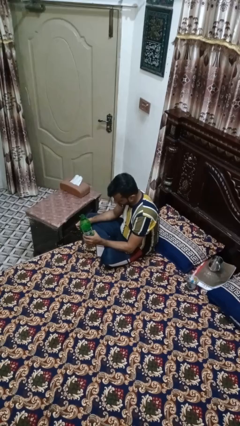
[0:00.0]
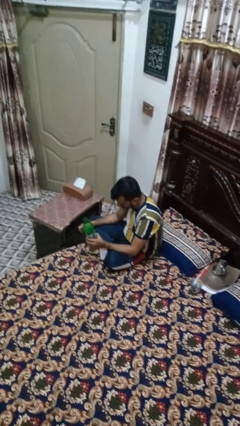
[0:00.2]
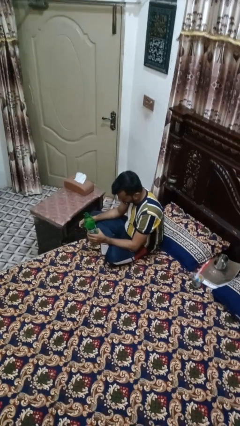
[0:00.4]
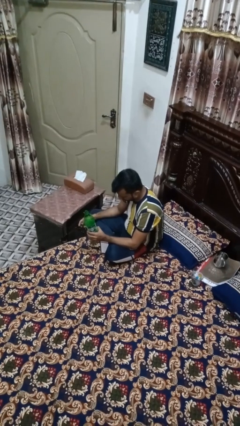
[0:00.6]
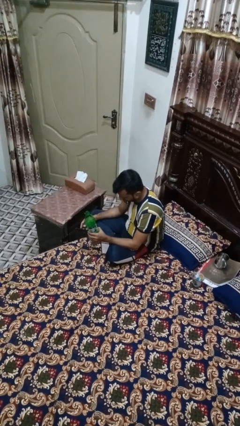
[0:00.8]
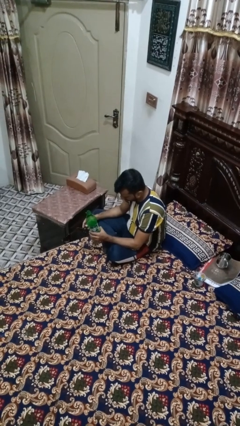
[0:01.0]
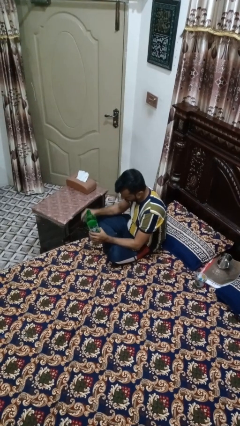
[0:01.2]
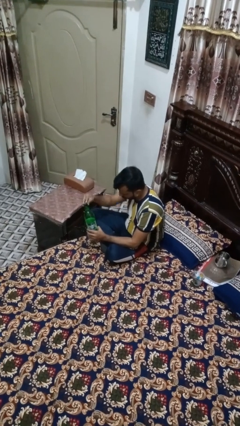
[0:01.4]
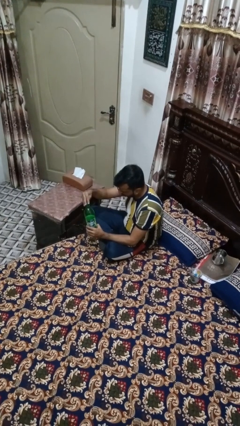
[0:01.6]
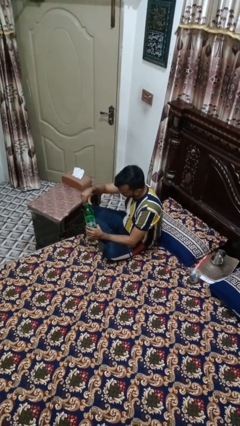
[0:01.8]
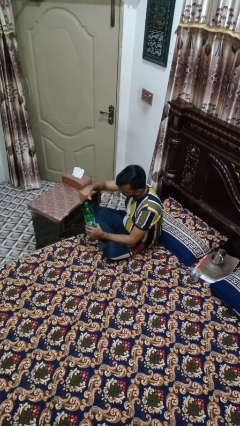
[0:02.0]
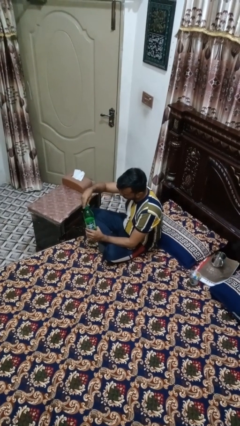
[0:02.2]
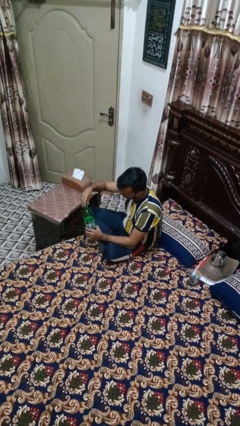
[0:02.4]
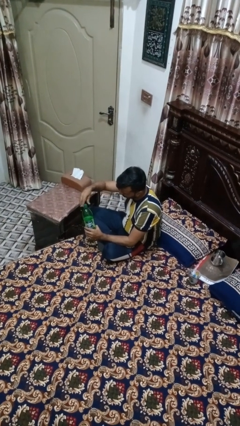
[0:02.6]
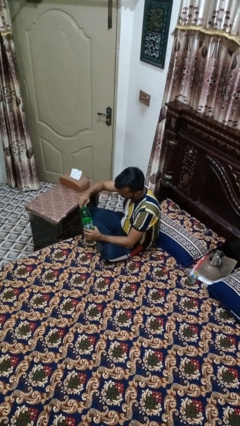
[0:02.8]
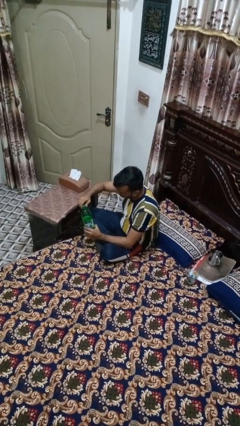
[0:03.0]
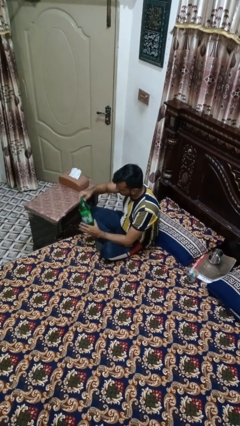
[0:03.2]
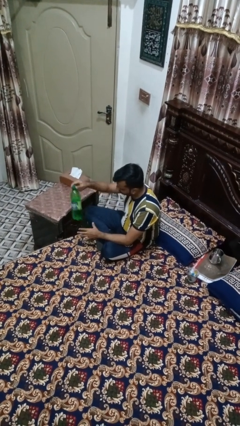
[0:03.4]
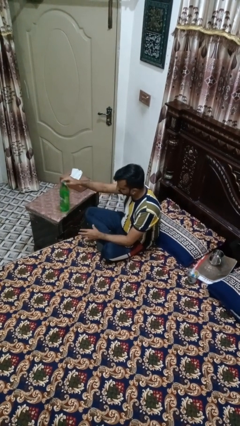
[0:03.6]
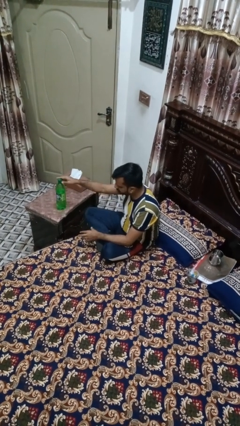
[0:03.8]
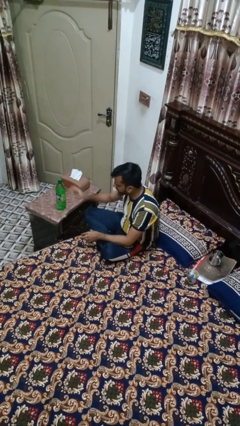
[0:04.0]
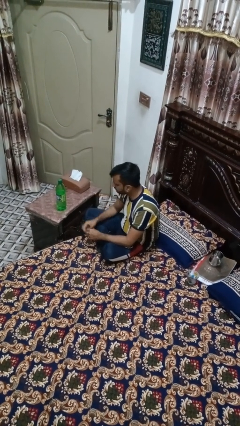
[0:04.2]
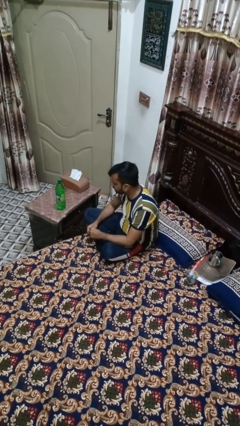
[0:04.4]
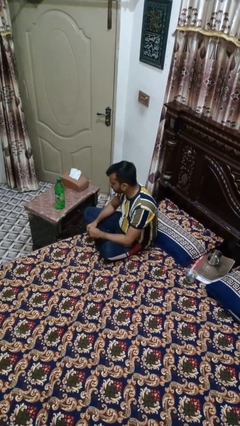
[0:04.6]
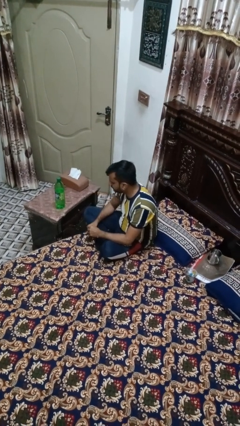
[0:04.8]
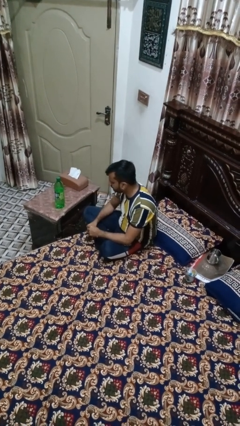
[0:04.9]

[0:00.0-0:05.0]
person screws lid to bottle

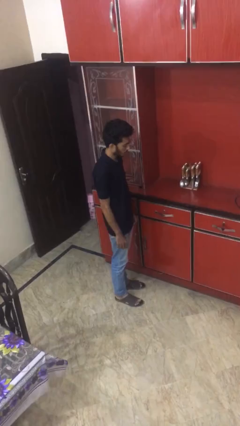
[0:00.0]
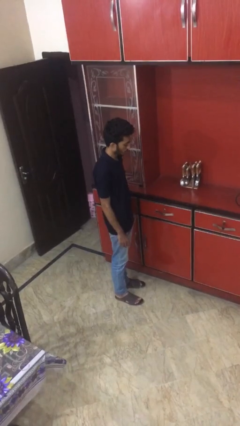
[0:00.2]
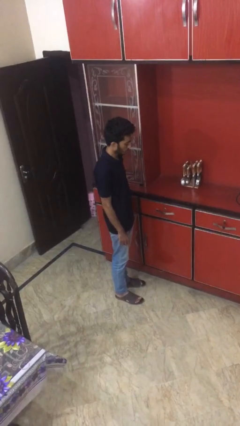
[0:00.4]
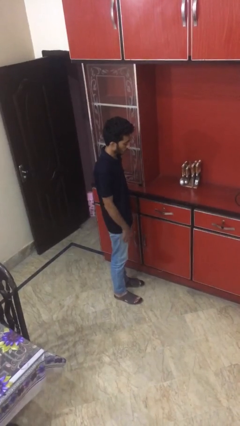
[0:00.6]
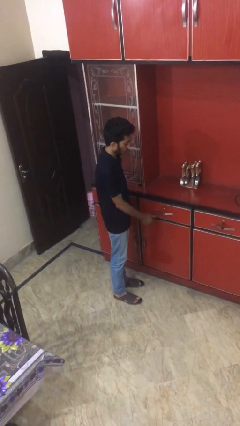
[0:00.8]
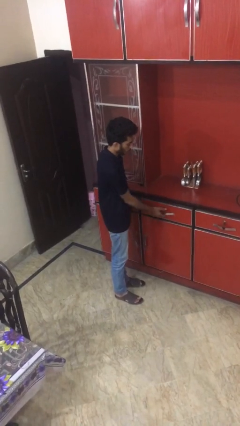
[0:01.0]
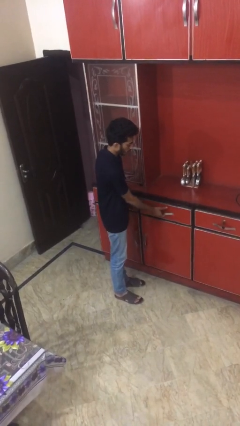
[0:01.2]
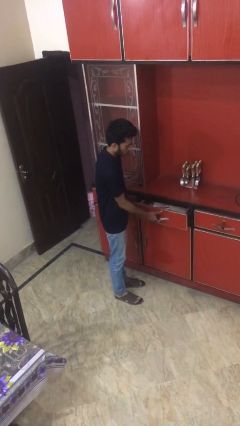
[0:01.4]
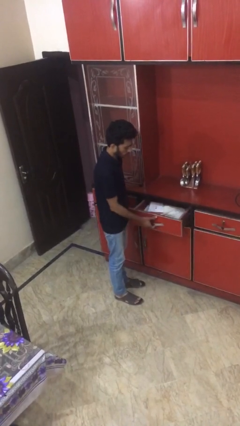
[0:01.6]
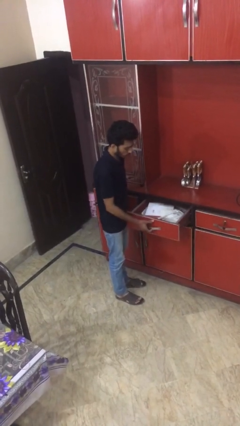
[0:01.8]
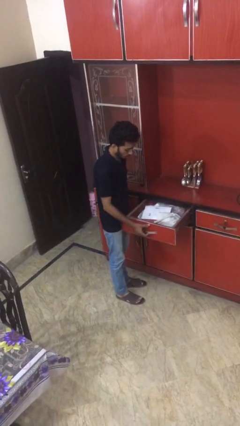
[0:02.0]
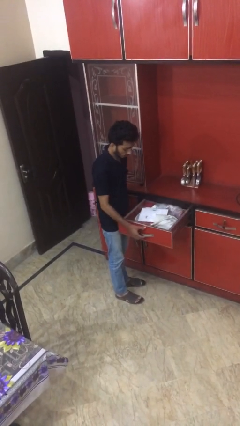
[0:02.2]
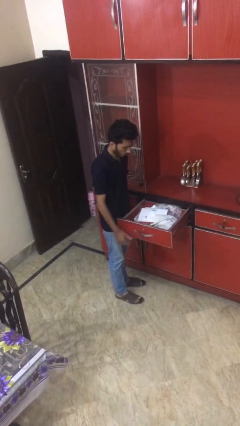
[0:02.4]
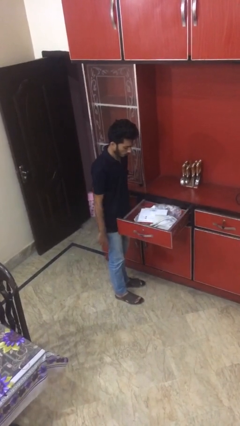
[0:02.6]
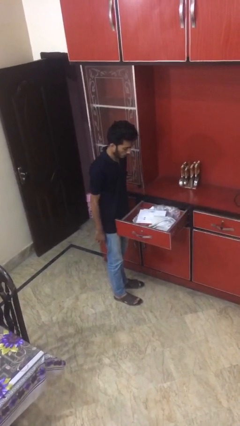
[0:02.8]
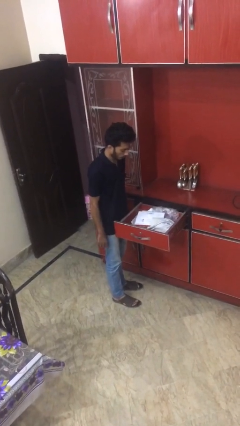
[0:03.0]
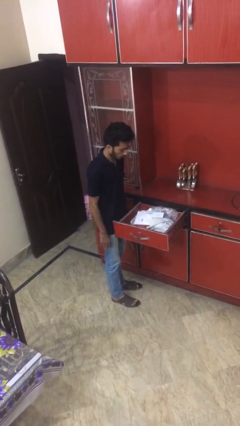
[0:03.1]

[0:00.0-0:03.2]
person opens kitchen drawer

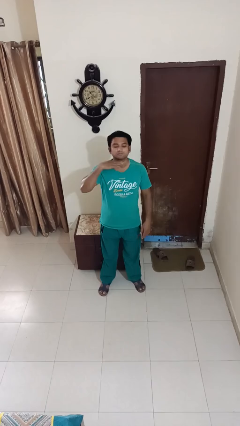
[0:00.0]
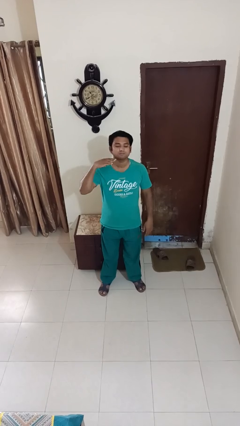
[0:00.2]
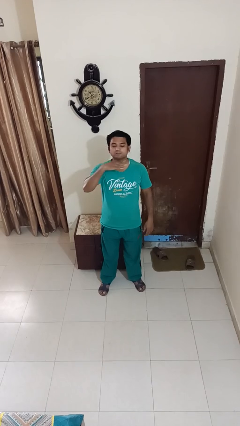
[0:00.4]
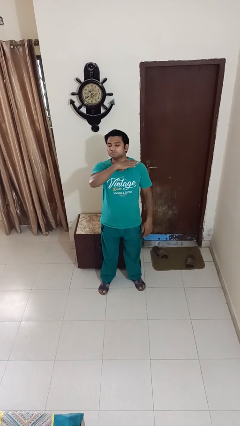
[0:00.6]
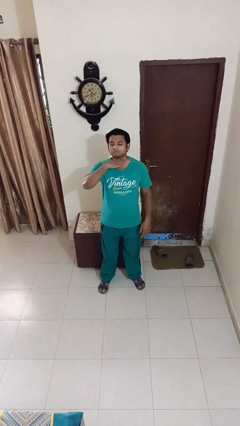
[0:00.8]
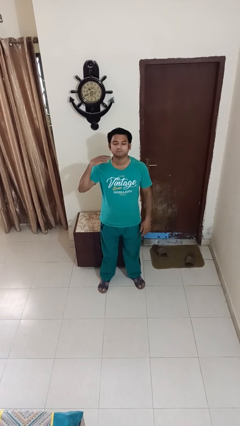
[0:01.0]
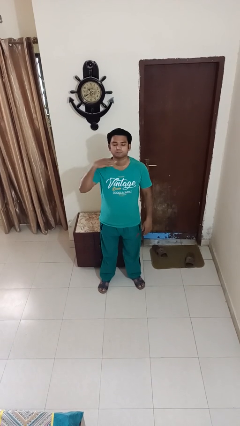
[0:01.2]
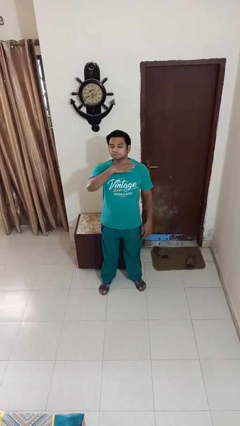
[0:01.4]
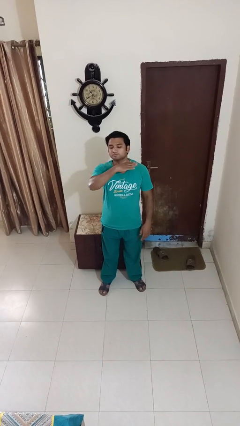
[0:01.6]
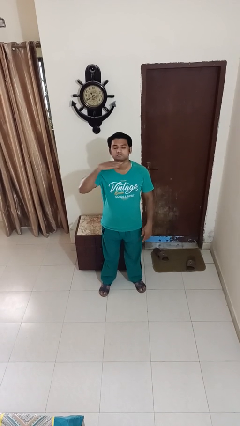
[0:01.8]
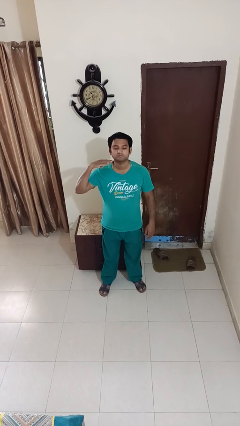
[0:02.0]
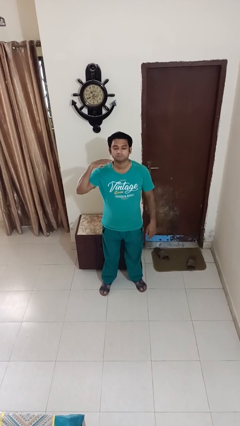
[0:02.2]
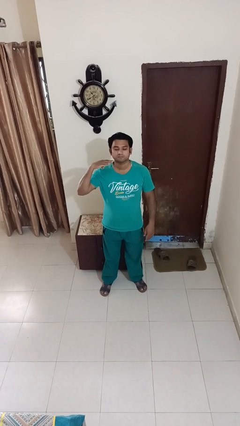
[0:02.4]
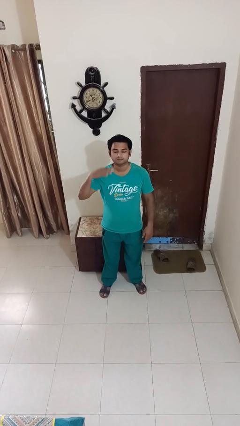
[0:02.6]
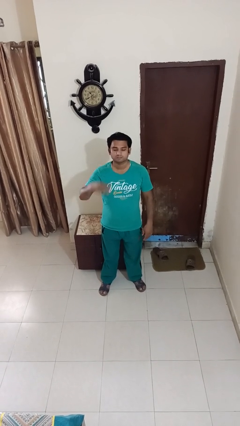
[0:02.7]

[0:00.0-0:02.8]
person gestures cut

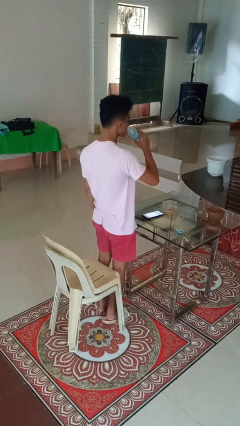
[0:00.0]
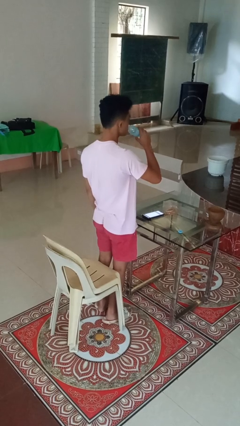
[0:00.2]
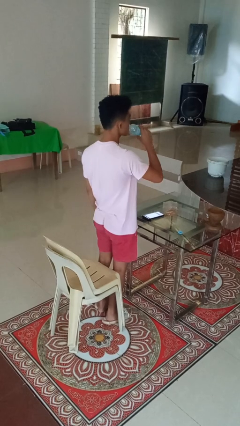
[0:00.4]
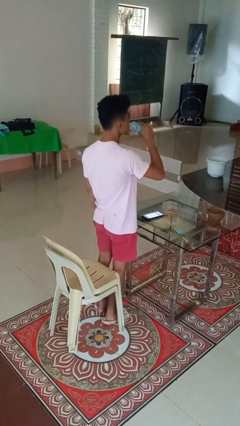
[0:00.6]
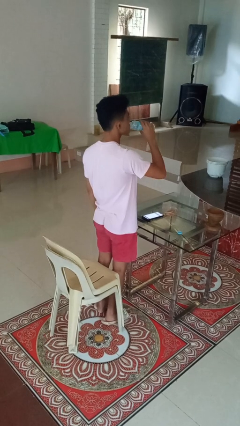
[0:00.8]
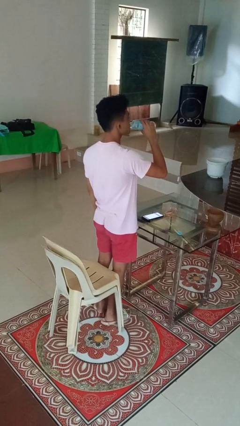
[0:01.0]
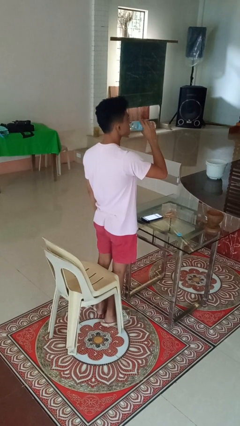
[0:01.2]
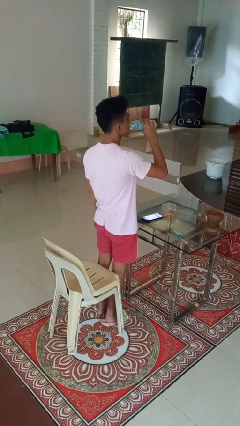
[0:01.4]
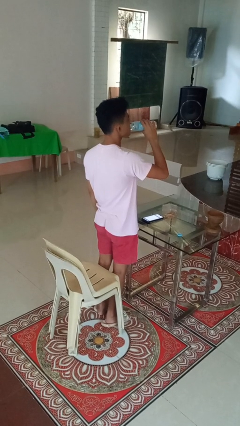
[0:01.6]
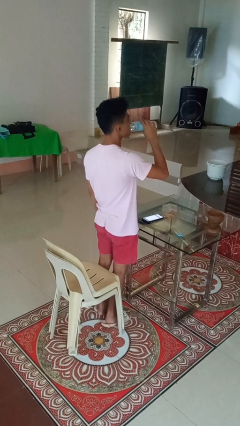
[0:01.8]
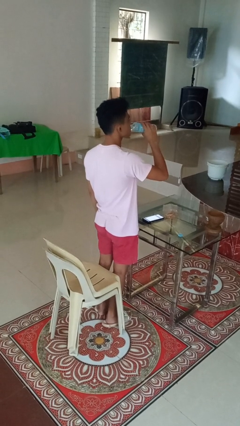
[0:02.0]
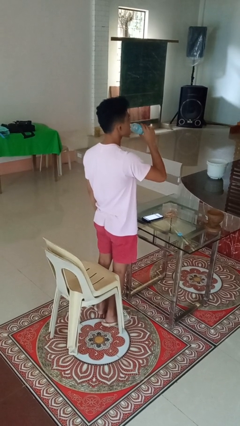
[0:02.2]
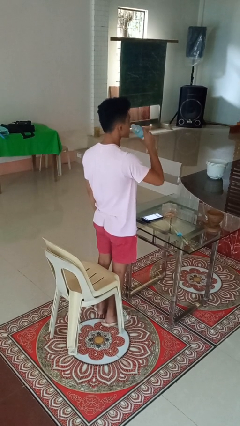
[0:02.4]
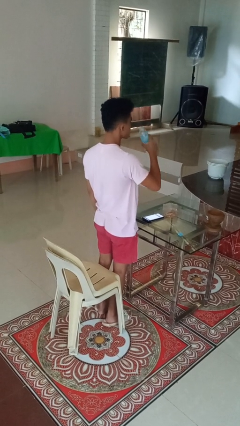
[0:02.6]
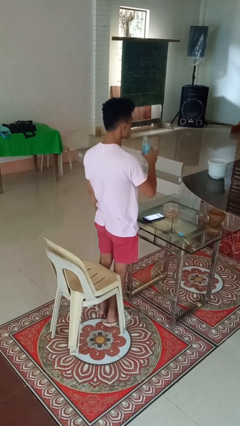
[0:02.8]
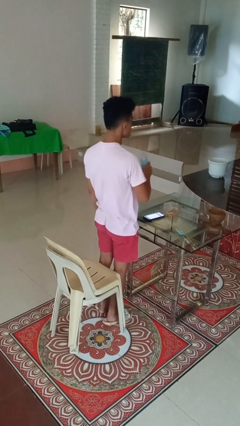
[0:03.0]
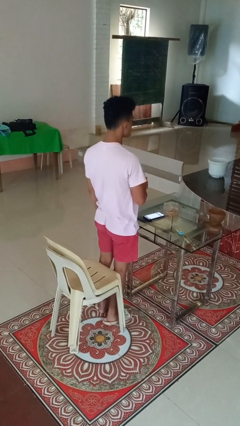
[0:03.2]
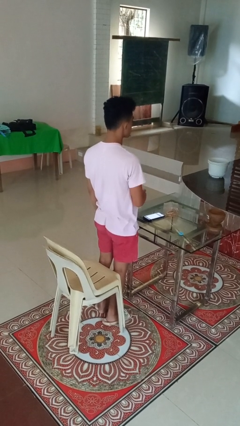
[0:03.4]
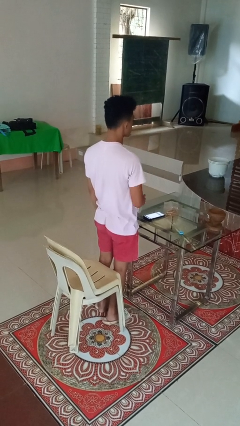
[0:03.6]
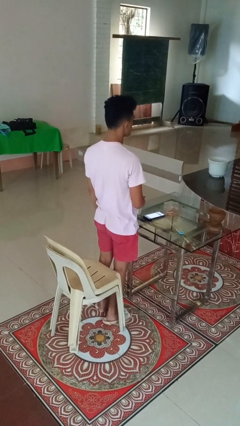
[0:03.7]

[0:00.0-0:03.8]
person drinks from bottle

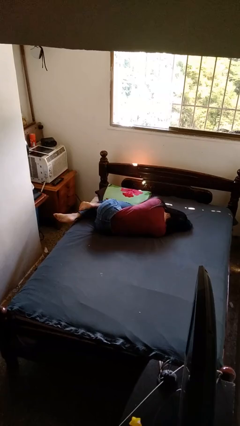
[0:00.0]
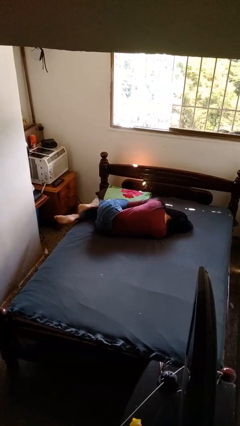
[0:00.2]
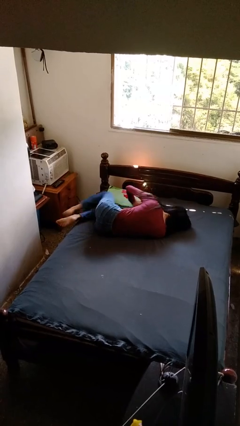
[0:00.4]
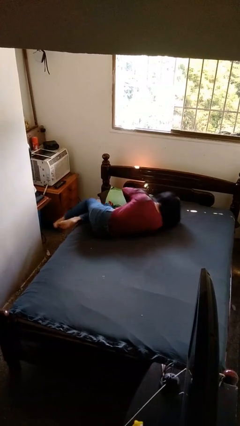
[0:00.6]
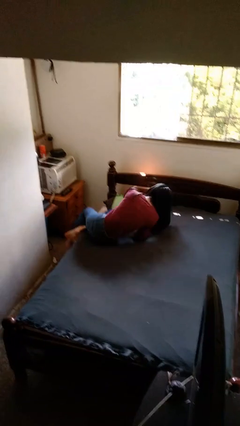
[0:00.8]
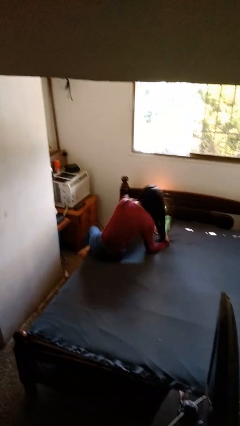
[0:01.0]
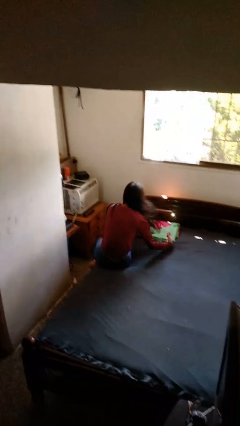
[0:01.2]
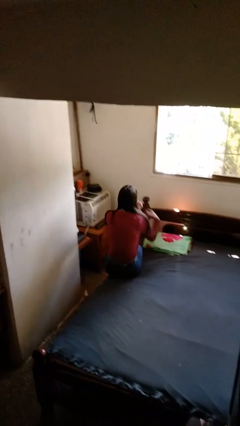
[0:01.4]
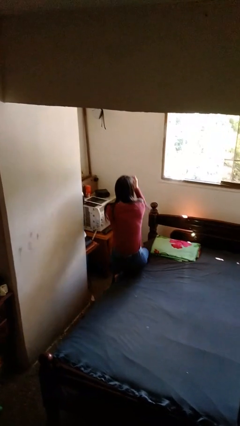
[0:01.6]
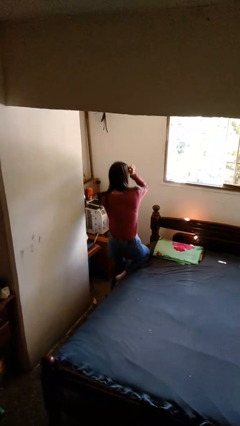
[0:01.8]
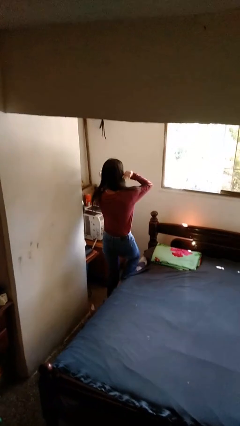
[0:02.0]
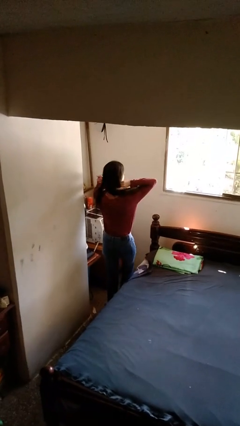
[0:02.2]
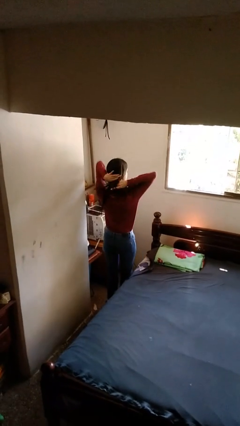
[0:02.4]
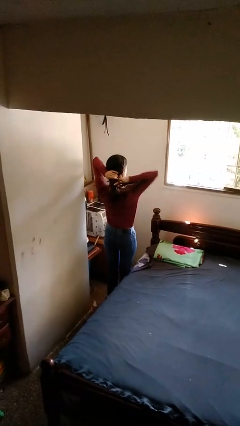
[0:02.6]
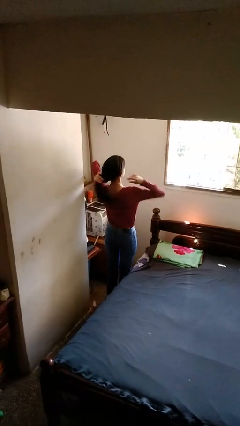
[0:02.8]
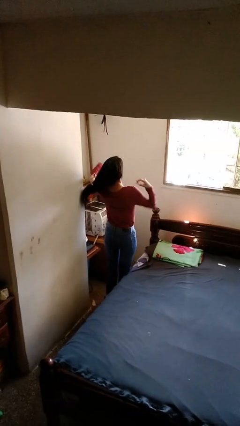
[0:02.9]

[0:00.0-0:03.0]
person stands up
